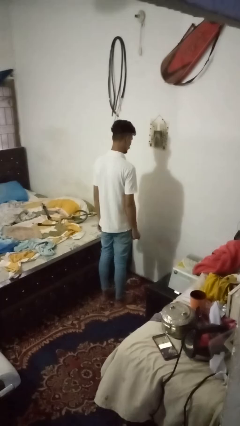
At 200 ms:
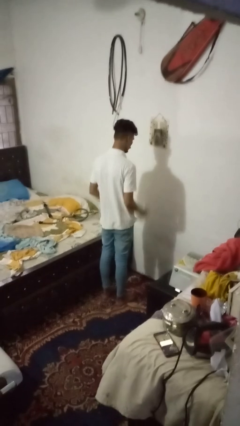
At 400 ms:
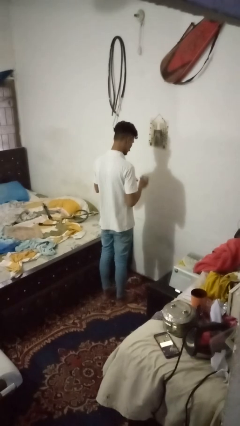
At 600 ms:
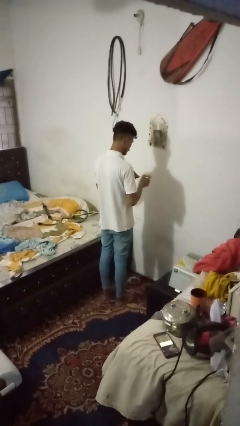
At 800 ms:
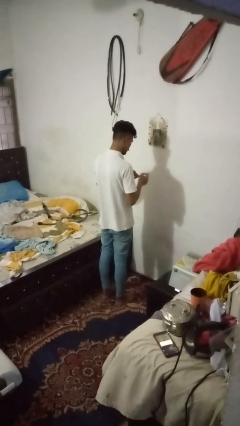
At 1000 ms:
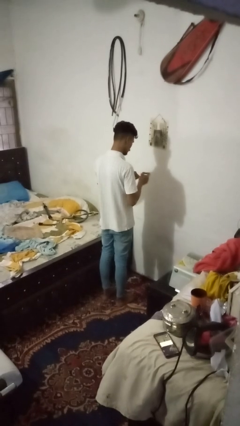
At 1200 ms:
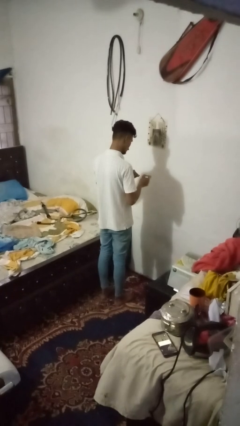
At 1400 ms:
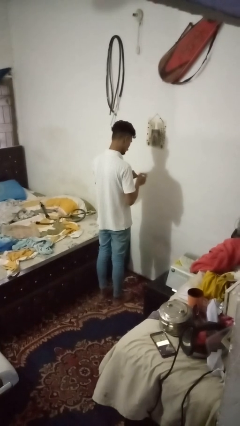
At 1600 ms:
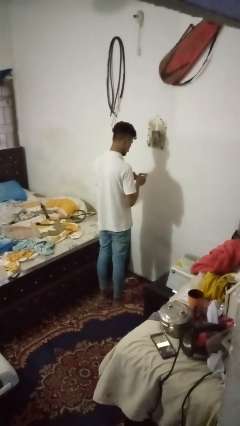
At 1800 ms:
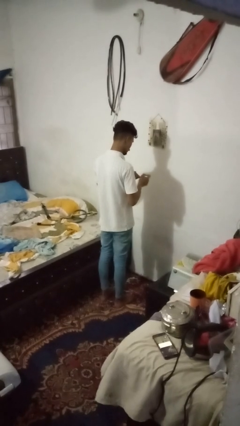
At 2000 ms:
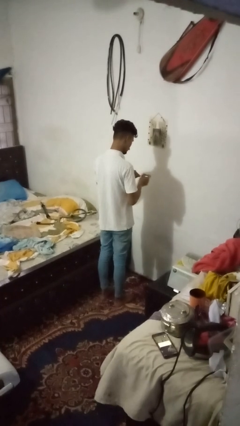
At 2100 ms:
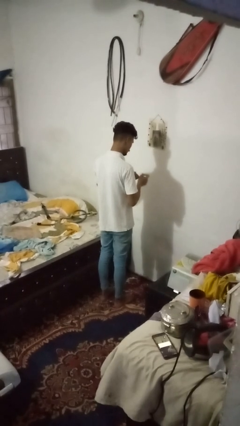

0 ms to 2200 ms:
person paints fingernails

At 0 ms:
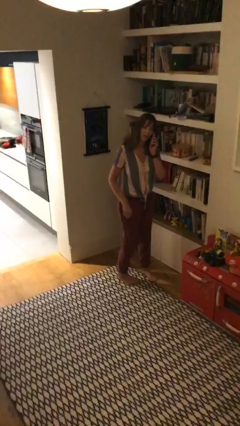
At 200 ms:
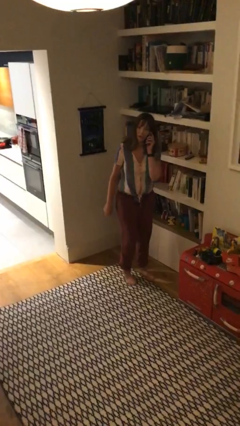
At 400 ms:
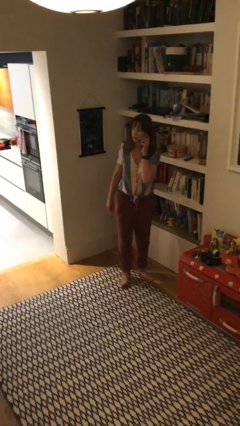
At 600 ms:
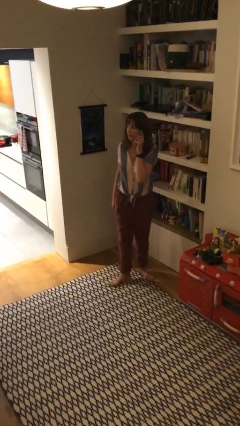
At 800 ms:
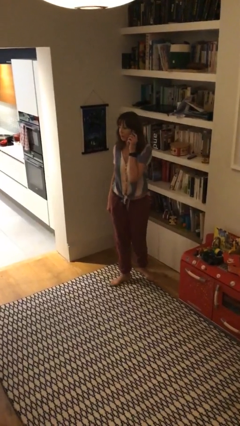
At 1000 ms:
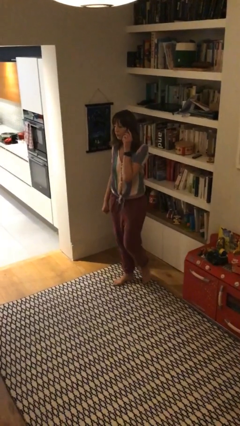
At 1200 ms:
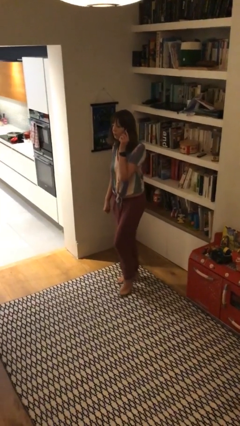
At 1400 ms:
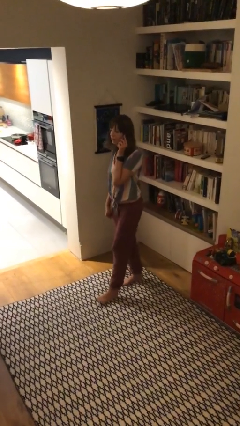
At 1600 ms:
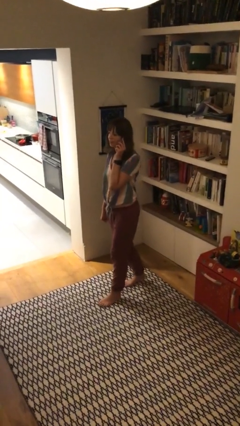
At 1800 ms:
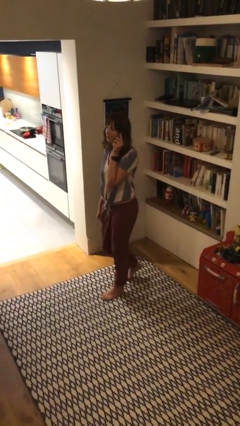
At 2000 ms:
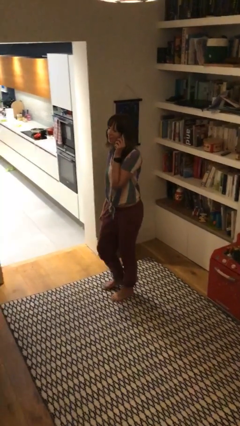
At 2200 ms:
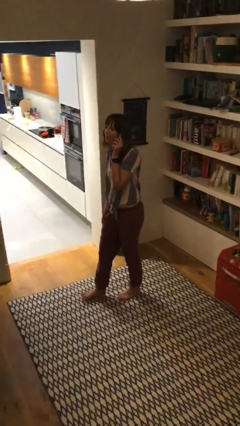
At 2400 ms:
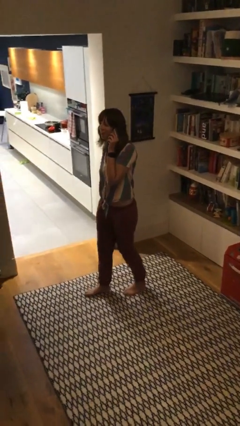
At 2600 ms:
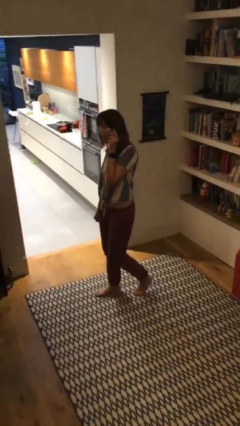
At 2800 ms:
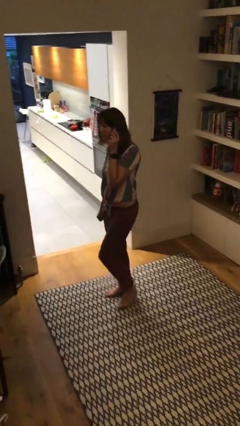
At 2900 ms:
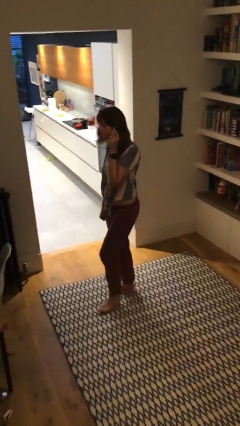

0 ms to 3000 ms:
person talks on phone

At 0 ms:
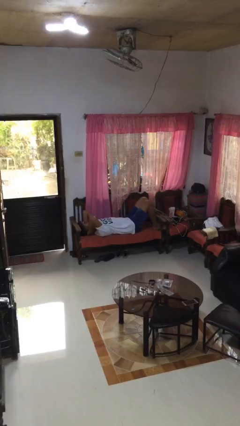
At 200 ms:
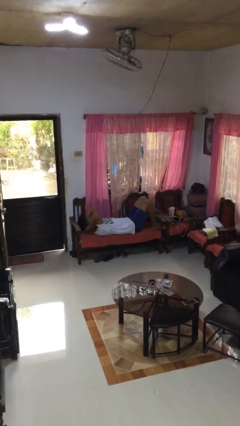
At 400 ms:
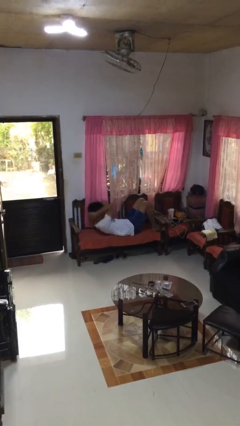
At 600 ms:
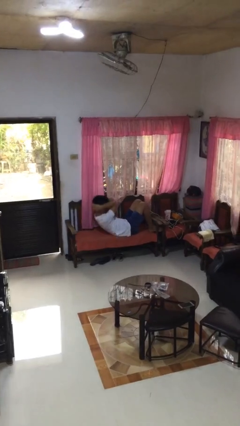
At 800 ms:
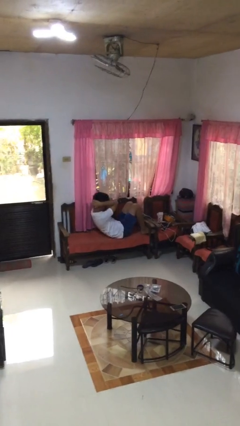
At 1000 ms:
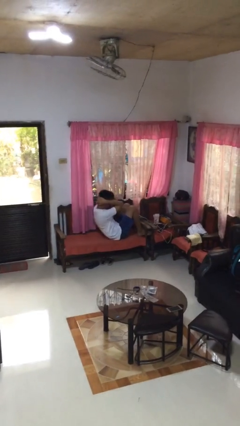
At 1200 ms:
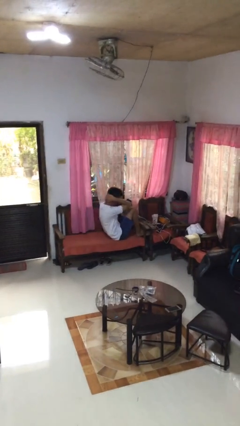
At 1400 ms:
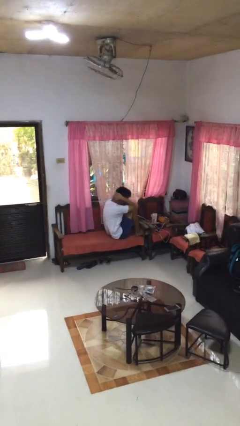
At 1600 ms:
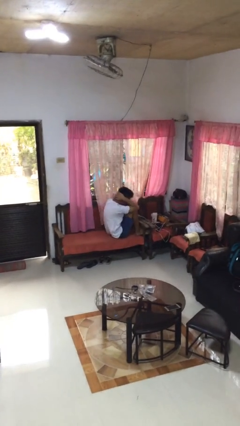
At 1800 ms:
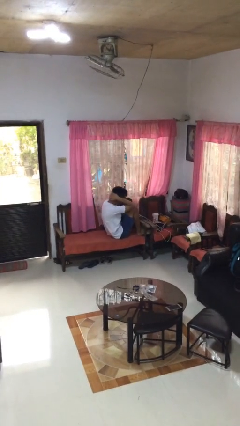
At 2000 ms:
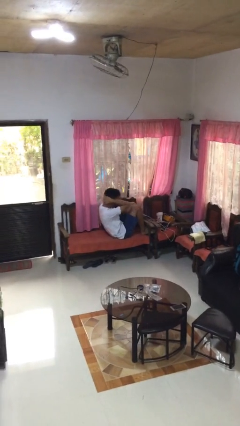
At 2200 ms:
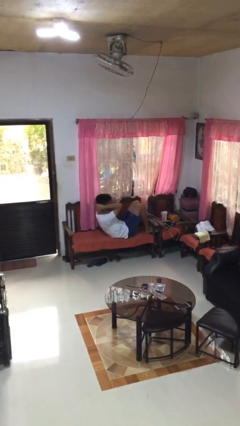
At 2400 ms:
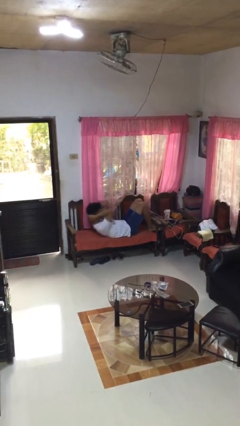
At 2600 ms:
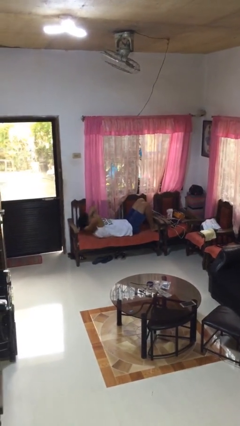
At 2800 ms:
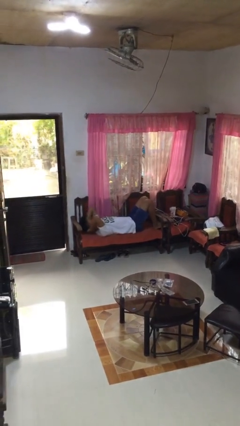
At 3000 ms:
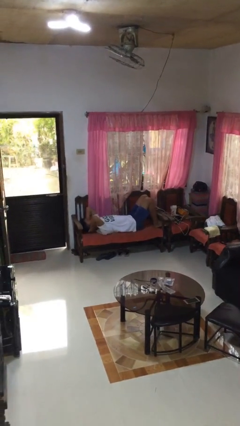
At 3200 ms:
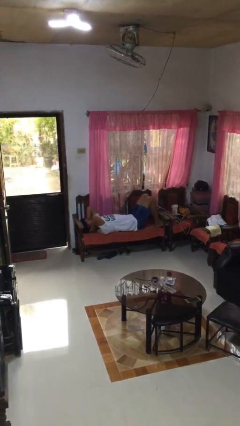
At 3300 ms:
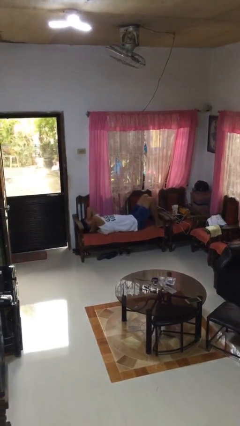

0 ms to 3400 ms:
person exercises with situp

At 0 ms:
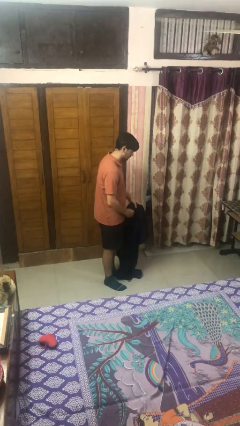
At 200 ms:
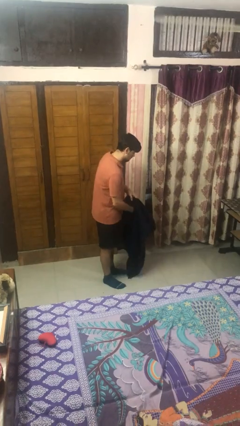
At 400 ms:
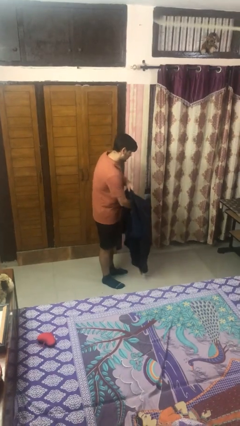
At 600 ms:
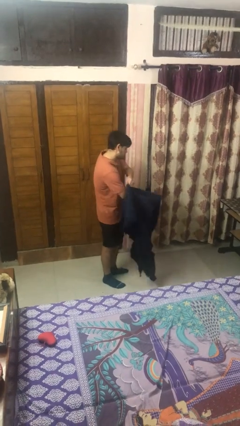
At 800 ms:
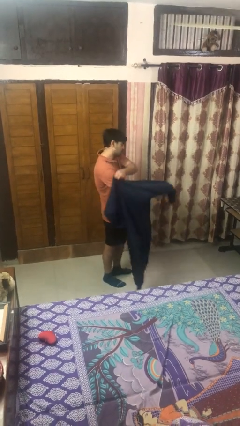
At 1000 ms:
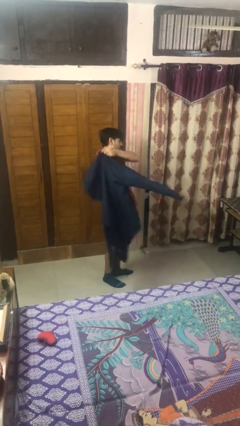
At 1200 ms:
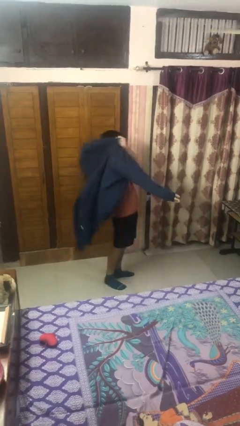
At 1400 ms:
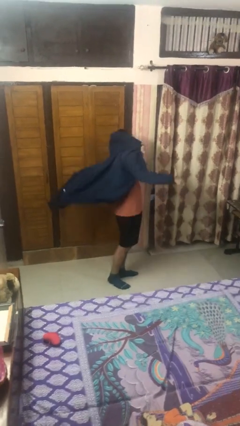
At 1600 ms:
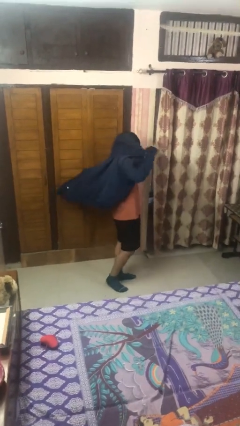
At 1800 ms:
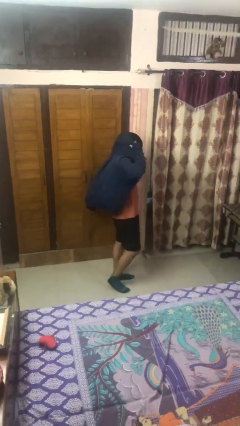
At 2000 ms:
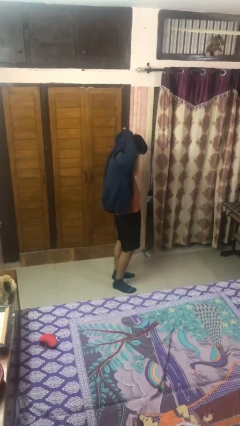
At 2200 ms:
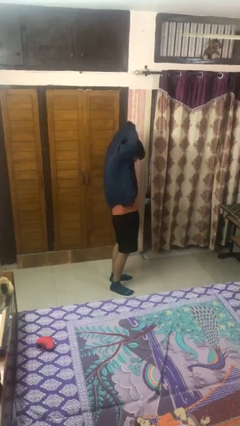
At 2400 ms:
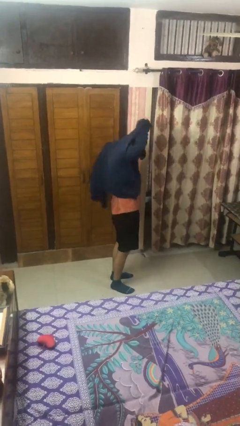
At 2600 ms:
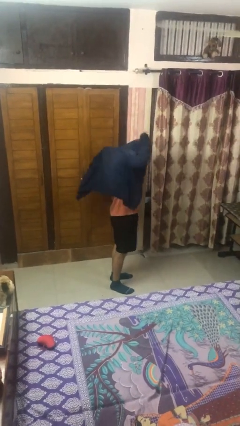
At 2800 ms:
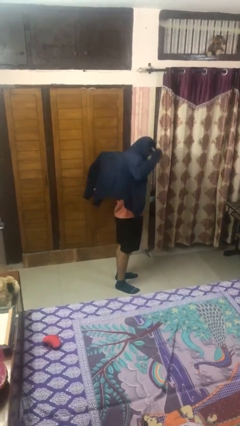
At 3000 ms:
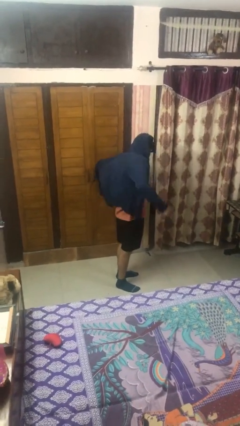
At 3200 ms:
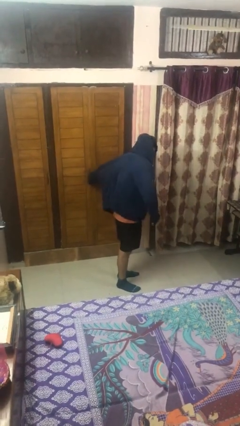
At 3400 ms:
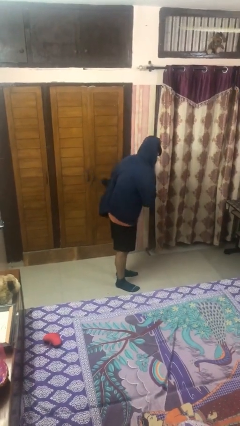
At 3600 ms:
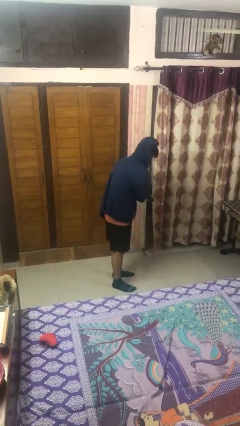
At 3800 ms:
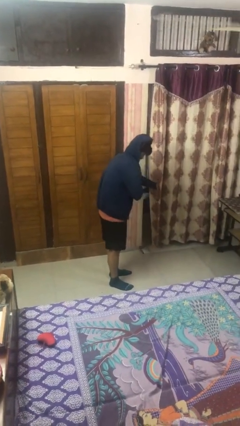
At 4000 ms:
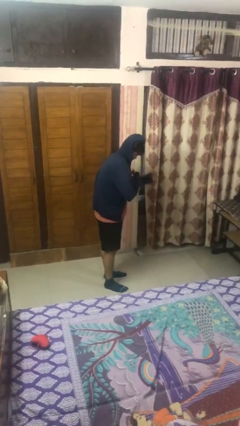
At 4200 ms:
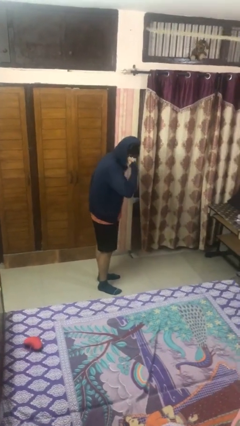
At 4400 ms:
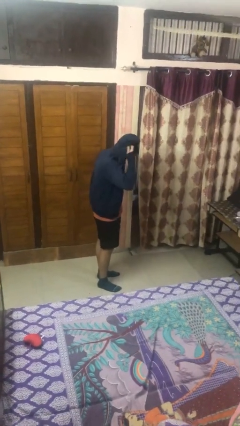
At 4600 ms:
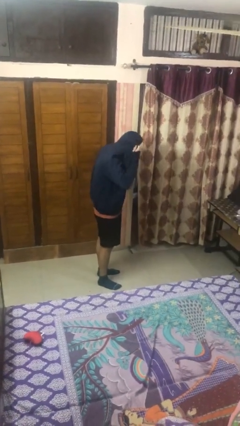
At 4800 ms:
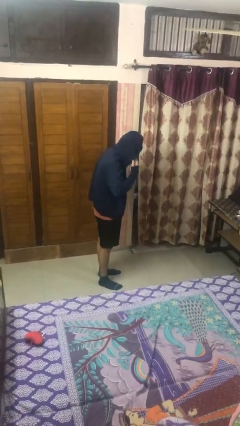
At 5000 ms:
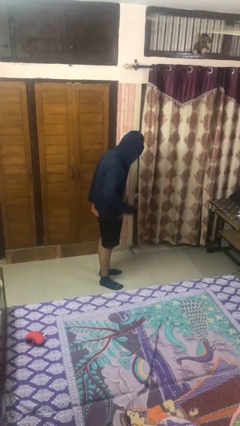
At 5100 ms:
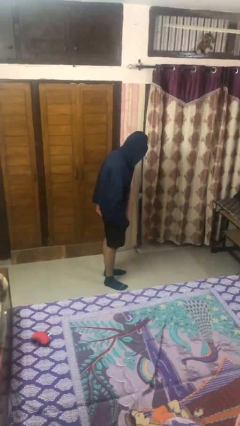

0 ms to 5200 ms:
person puts on hoodie

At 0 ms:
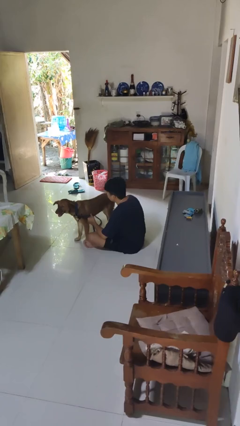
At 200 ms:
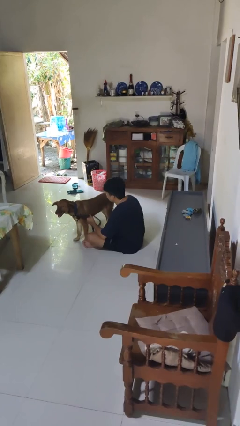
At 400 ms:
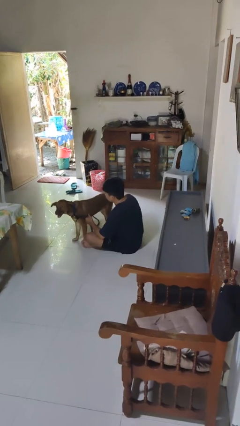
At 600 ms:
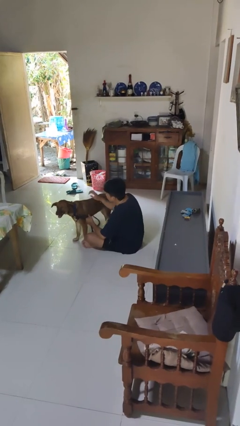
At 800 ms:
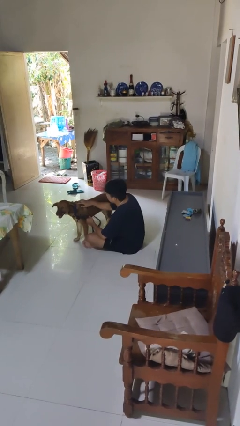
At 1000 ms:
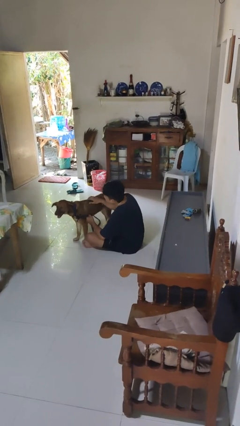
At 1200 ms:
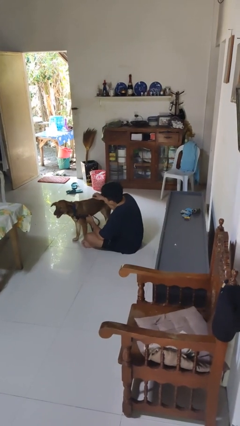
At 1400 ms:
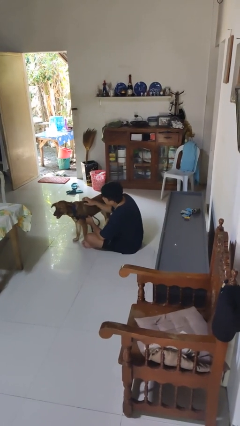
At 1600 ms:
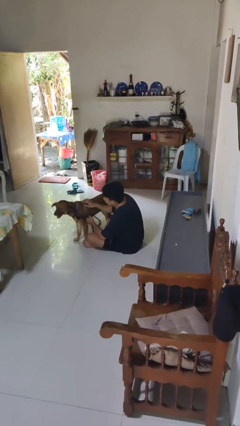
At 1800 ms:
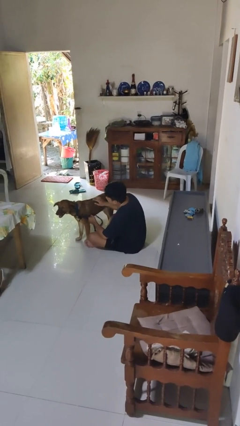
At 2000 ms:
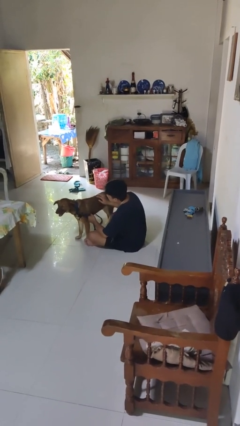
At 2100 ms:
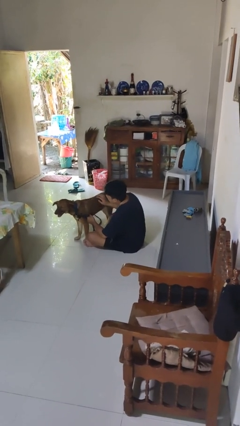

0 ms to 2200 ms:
person pets dog

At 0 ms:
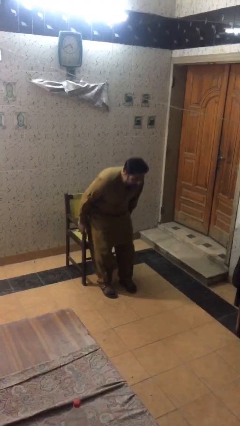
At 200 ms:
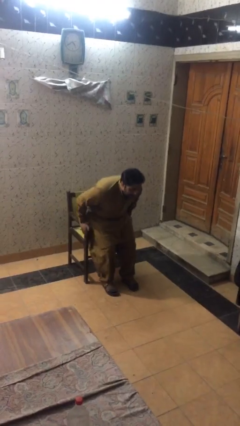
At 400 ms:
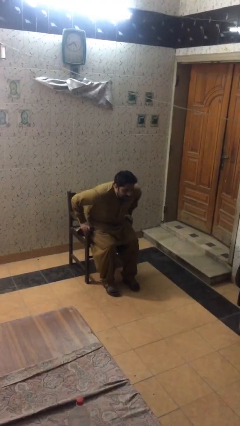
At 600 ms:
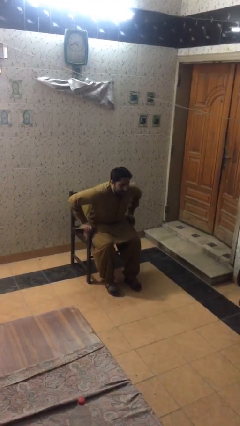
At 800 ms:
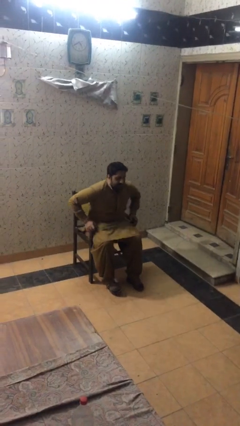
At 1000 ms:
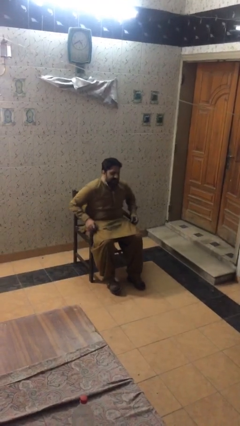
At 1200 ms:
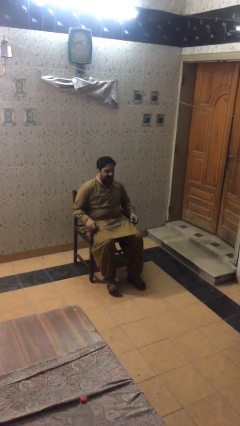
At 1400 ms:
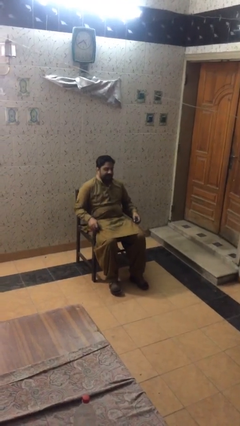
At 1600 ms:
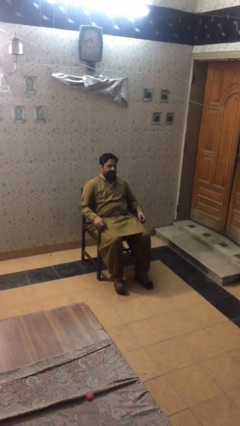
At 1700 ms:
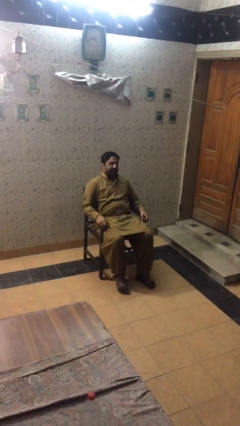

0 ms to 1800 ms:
person sits down
